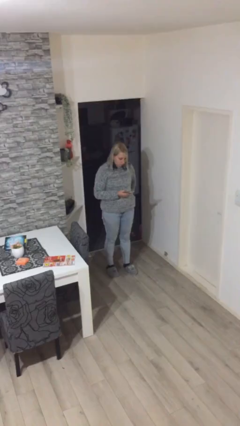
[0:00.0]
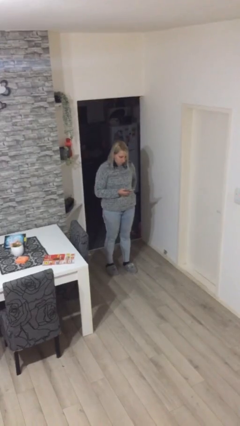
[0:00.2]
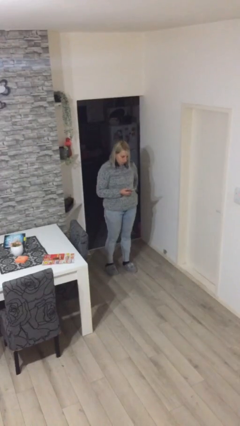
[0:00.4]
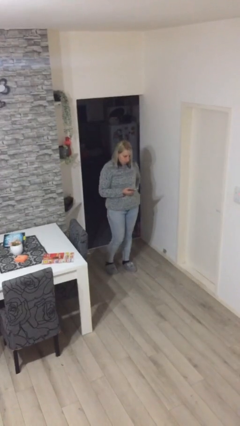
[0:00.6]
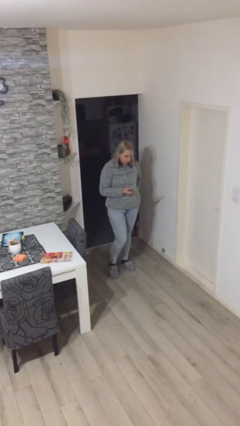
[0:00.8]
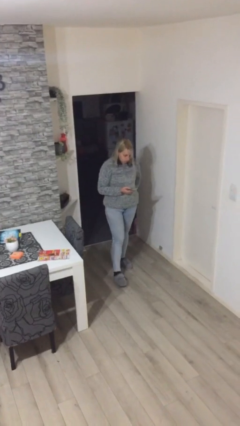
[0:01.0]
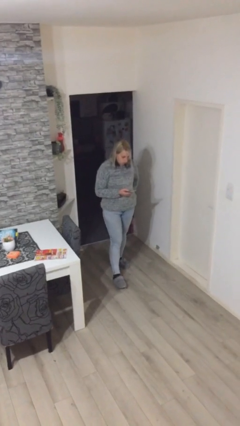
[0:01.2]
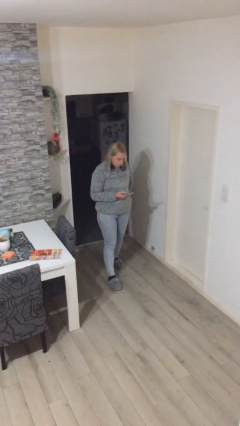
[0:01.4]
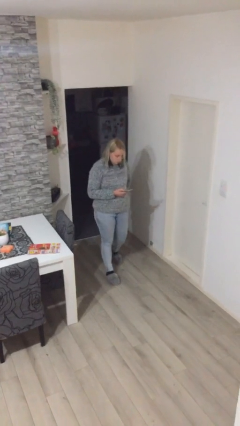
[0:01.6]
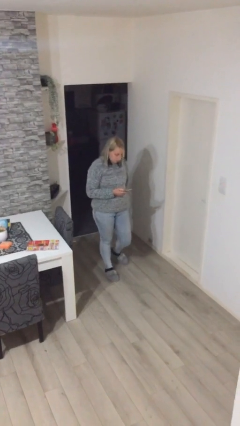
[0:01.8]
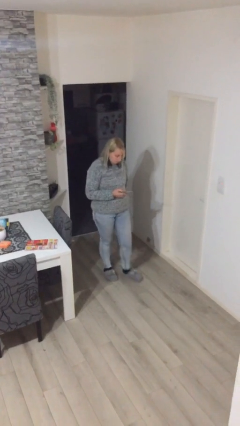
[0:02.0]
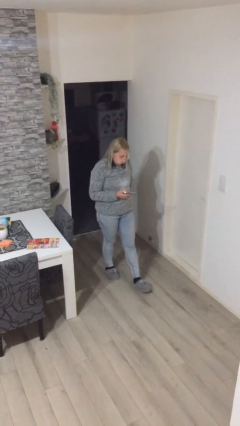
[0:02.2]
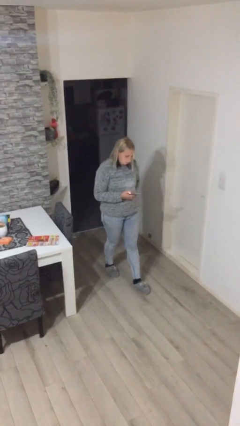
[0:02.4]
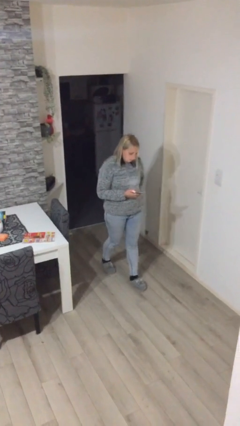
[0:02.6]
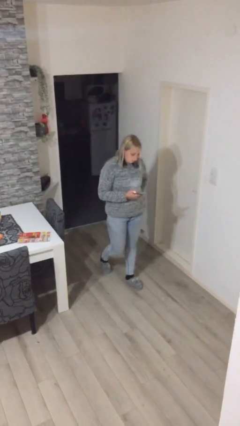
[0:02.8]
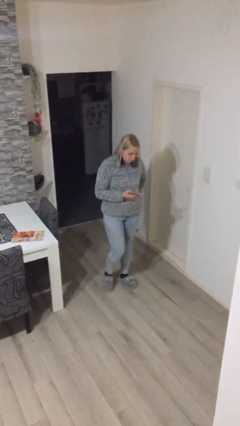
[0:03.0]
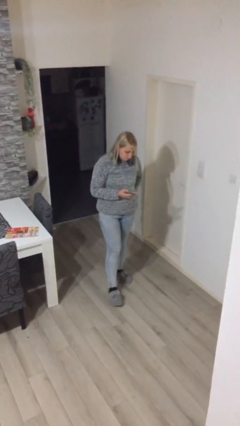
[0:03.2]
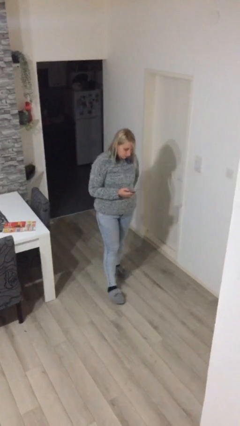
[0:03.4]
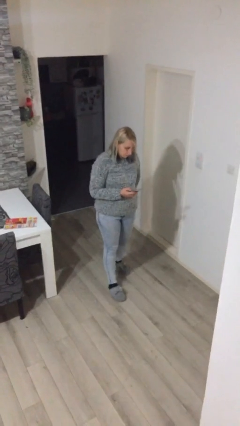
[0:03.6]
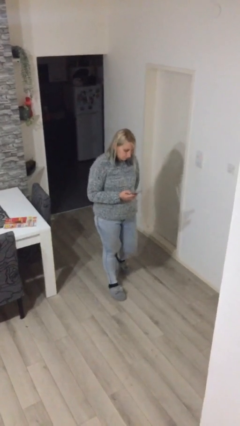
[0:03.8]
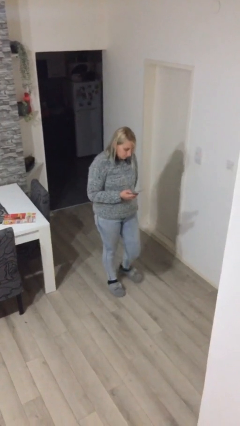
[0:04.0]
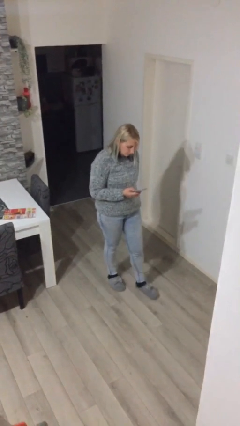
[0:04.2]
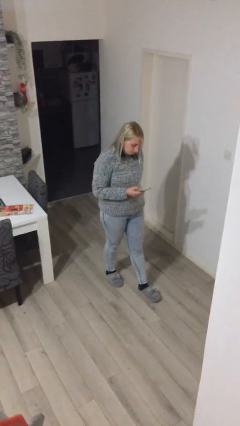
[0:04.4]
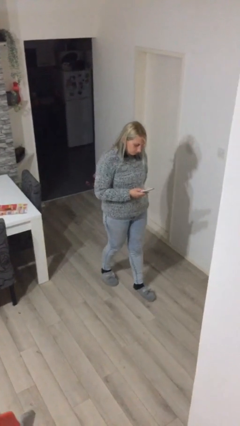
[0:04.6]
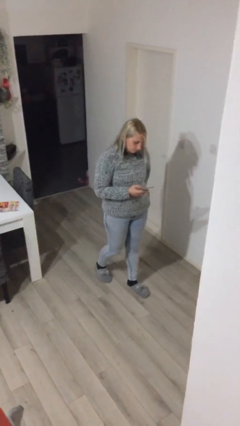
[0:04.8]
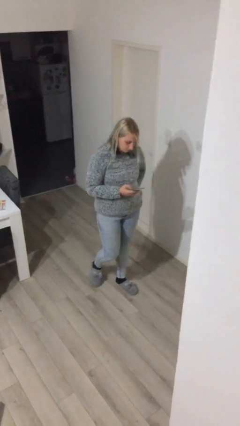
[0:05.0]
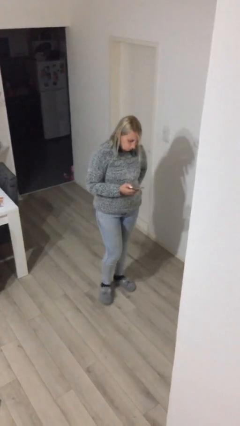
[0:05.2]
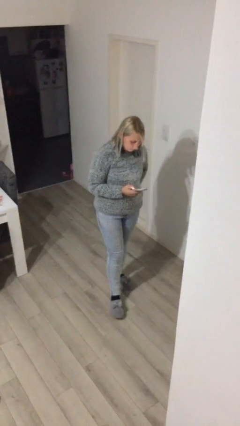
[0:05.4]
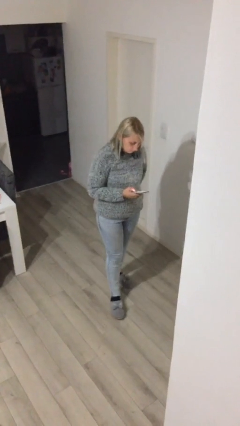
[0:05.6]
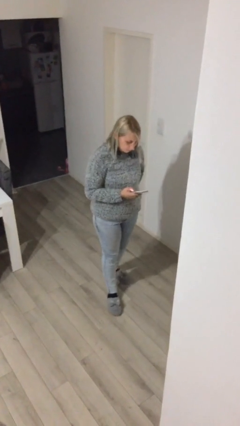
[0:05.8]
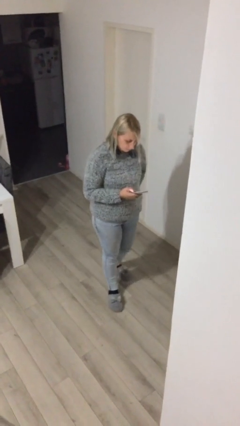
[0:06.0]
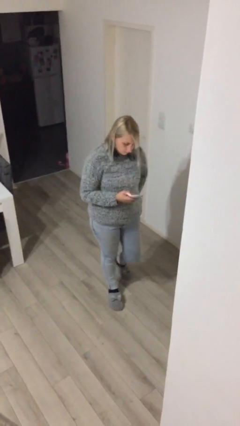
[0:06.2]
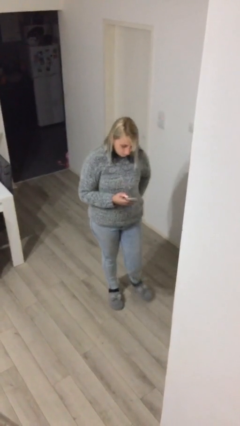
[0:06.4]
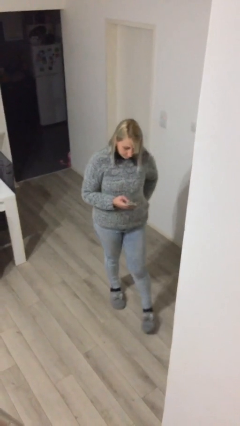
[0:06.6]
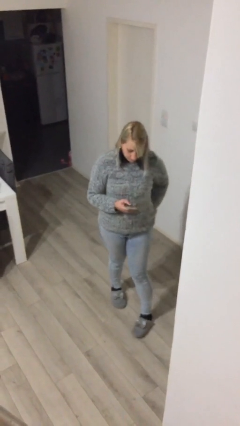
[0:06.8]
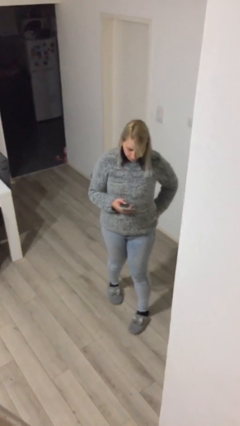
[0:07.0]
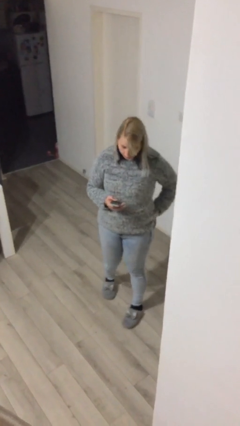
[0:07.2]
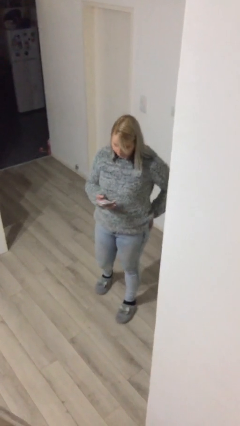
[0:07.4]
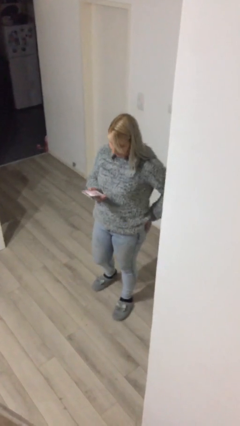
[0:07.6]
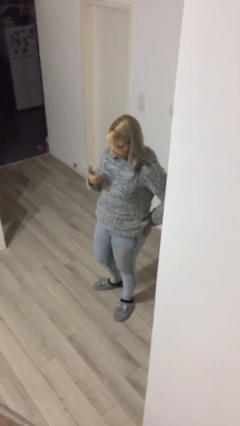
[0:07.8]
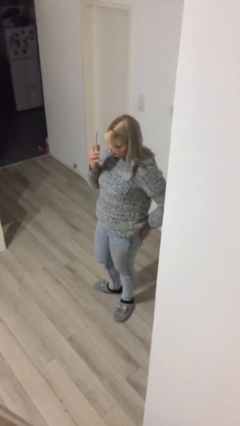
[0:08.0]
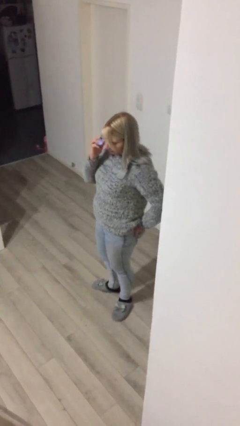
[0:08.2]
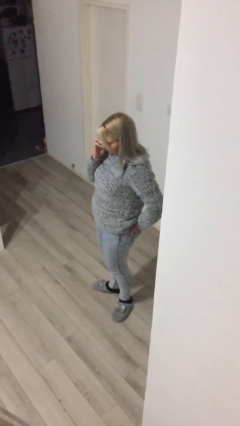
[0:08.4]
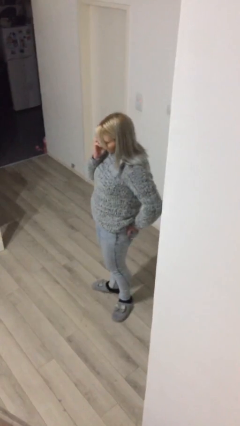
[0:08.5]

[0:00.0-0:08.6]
person texts on phone

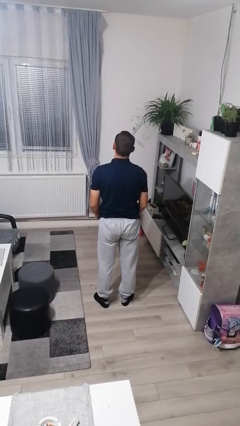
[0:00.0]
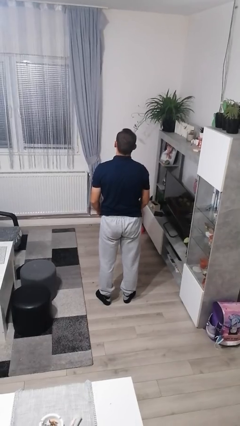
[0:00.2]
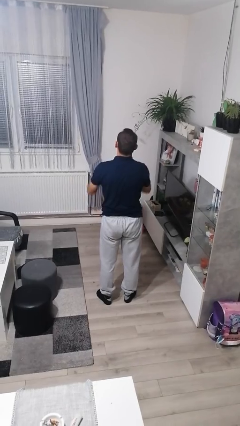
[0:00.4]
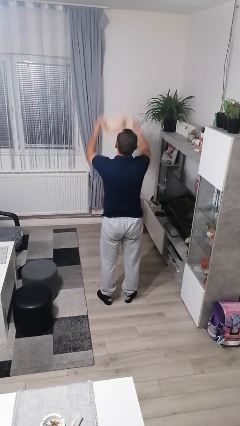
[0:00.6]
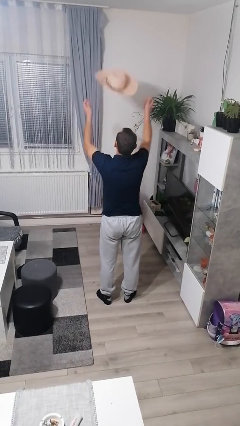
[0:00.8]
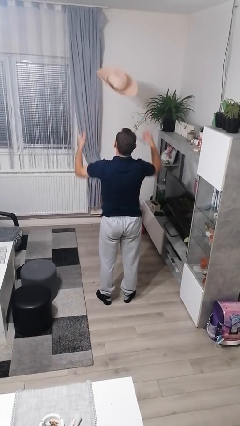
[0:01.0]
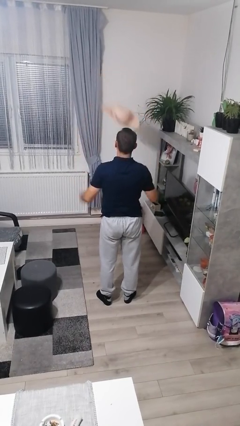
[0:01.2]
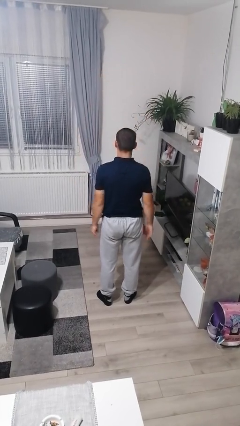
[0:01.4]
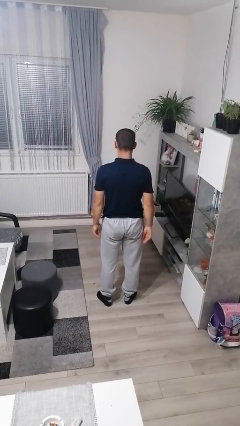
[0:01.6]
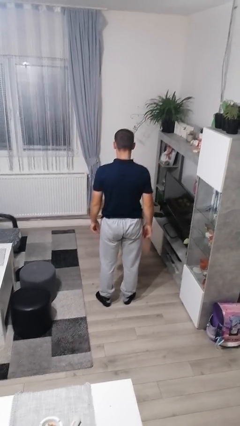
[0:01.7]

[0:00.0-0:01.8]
person throws object into air

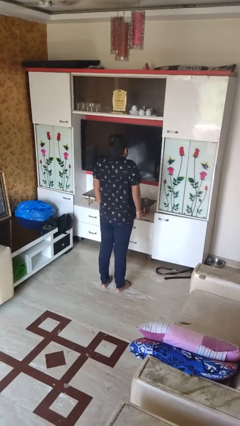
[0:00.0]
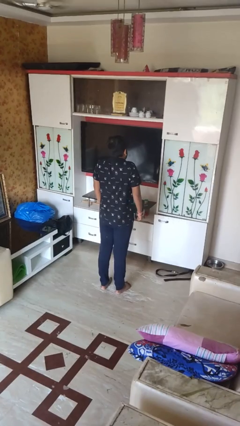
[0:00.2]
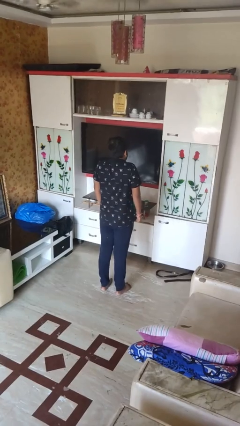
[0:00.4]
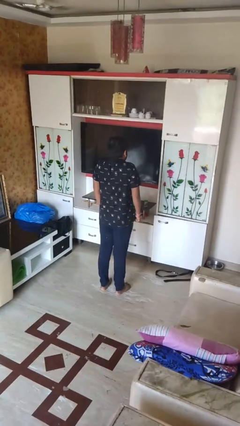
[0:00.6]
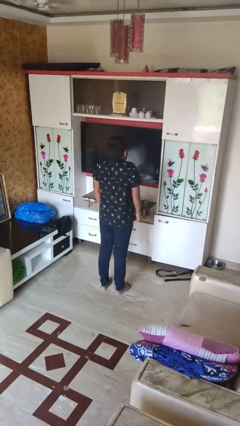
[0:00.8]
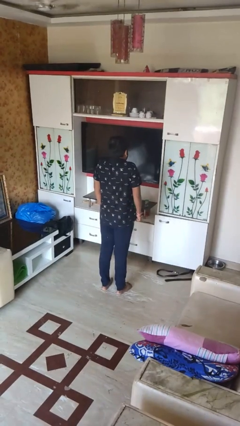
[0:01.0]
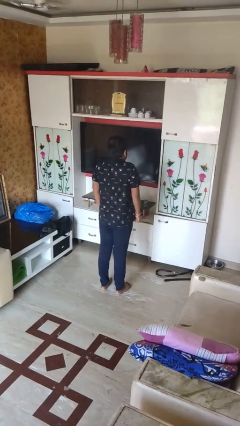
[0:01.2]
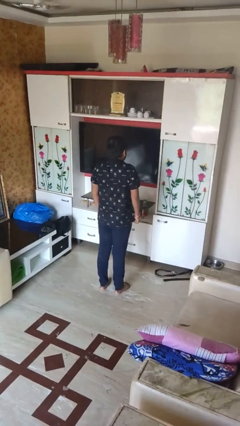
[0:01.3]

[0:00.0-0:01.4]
person shrugs

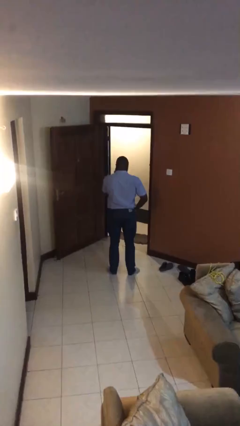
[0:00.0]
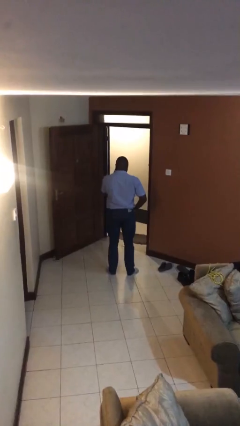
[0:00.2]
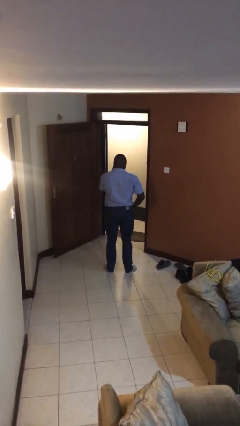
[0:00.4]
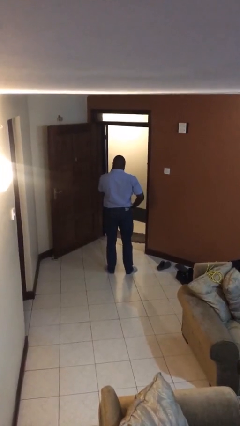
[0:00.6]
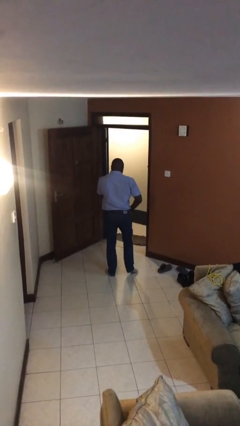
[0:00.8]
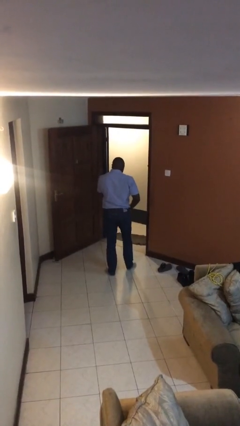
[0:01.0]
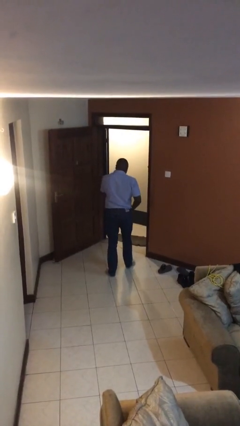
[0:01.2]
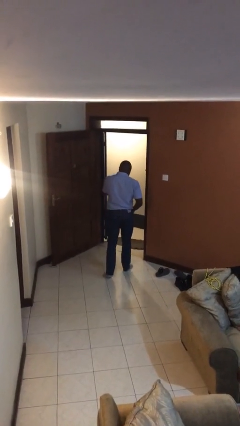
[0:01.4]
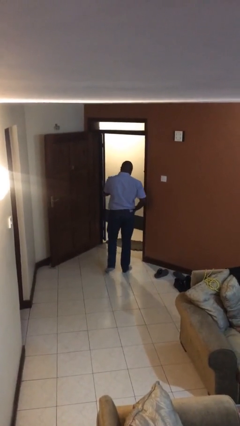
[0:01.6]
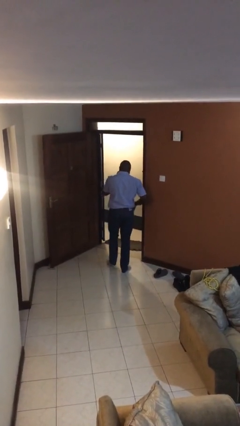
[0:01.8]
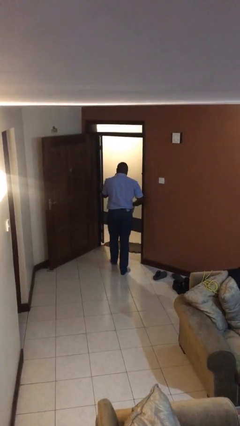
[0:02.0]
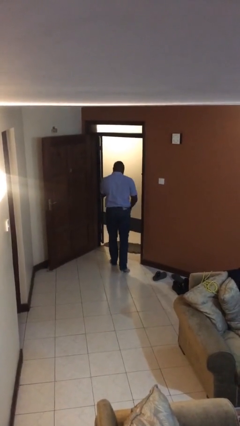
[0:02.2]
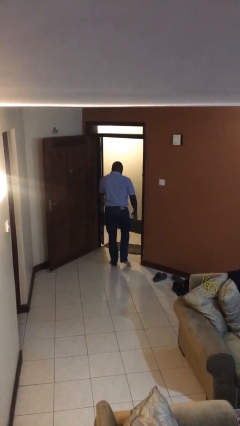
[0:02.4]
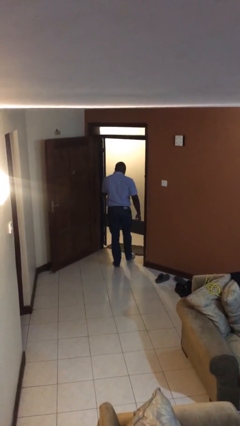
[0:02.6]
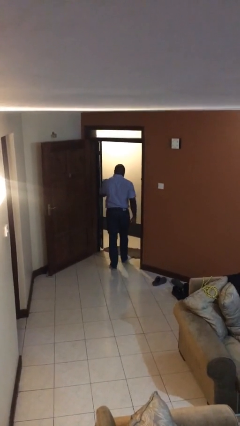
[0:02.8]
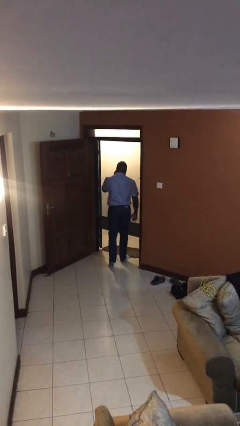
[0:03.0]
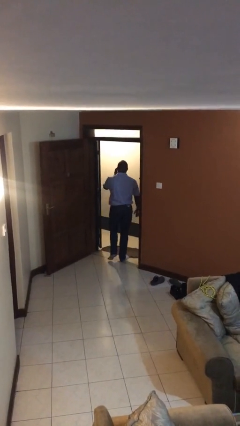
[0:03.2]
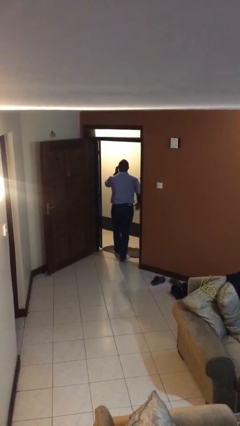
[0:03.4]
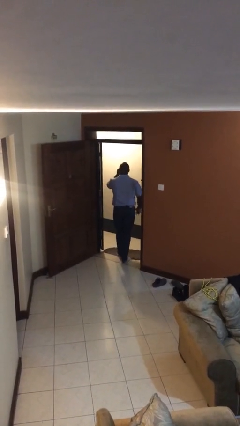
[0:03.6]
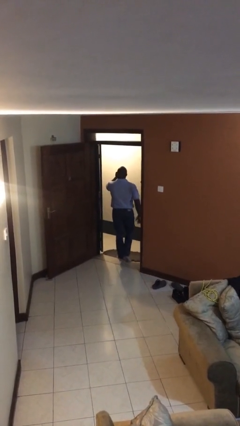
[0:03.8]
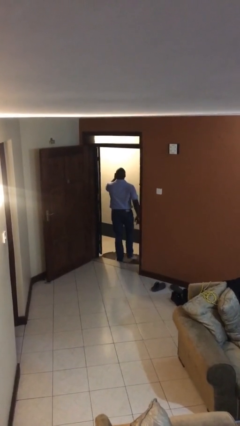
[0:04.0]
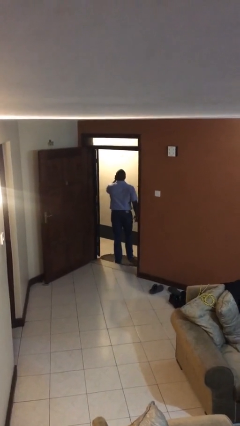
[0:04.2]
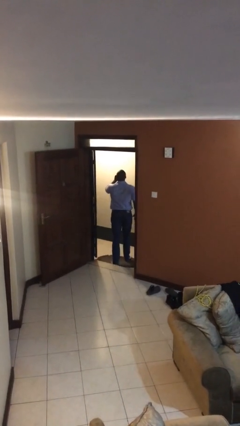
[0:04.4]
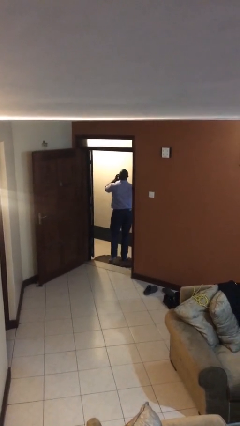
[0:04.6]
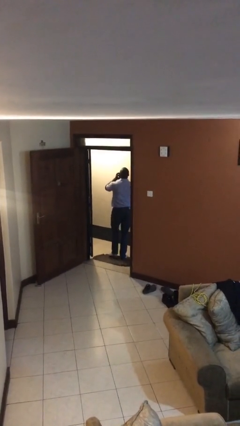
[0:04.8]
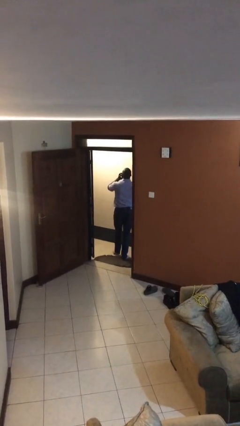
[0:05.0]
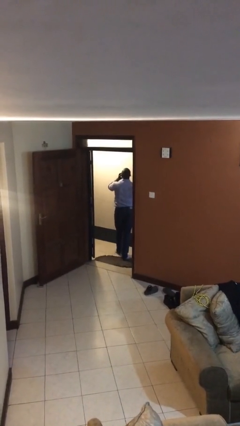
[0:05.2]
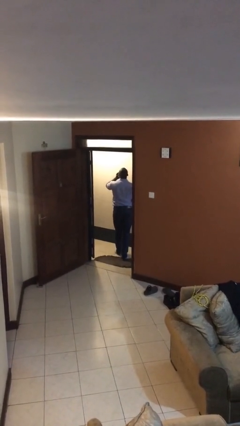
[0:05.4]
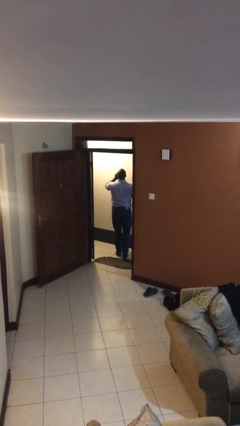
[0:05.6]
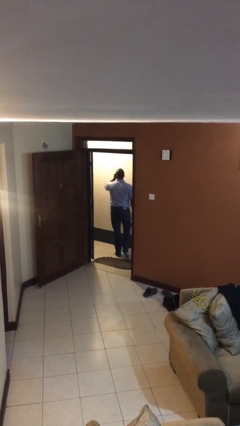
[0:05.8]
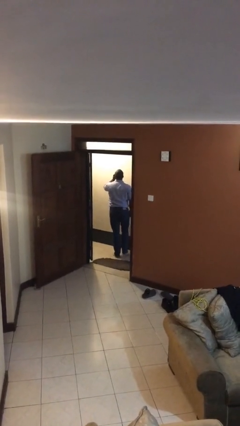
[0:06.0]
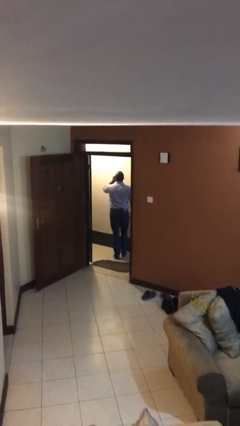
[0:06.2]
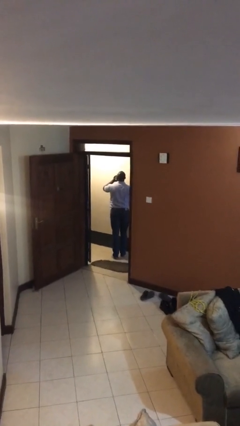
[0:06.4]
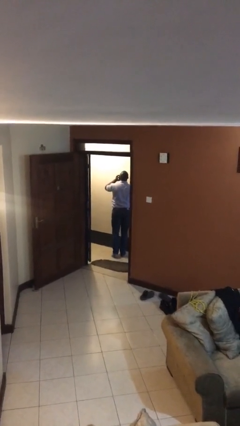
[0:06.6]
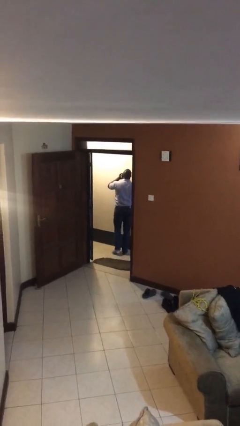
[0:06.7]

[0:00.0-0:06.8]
person exits scene through structure
